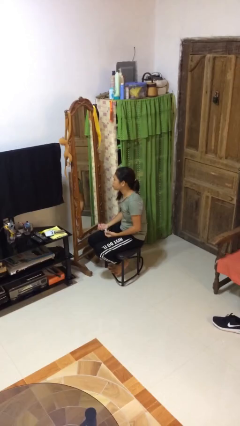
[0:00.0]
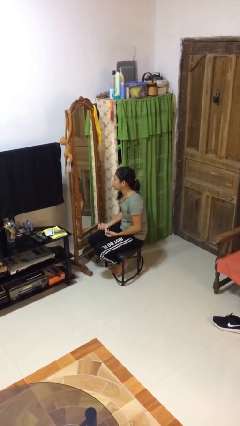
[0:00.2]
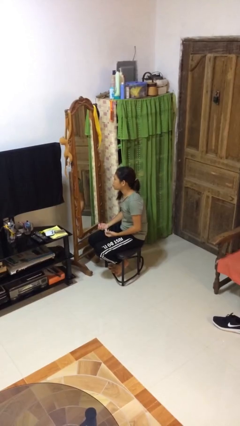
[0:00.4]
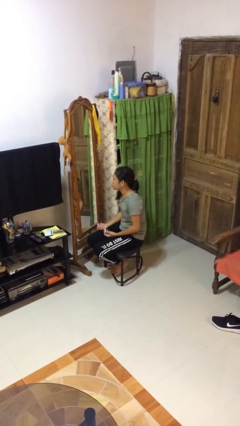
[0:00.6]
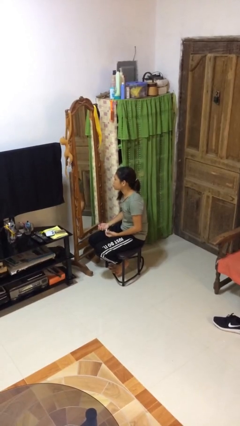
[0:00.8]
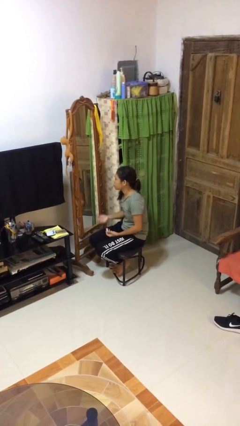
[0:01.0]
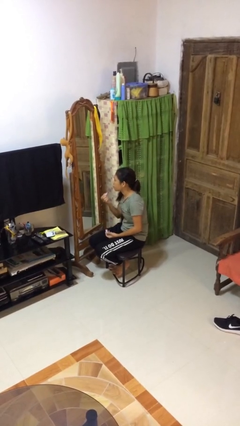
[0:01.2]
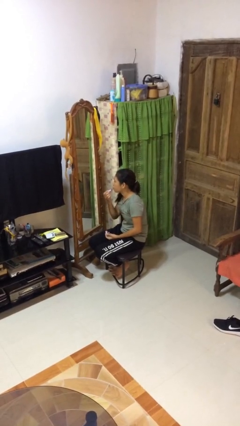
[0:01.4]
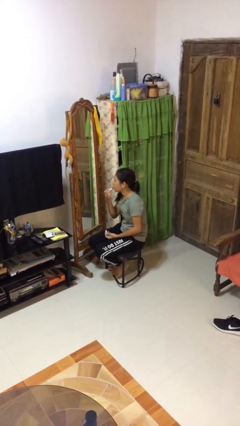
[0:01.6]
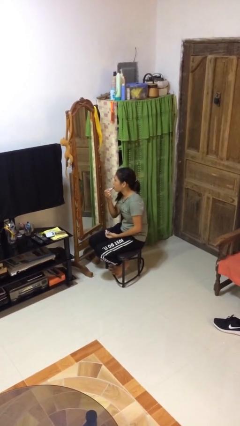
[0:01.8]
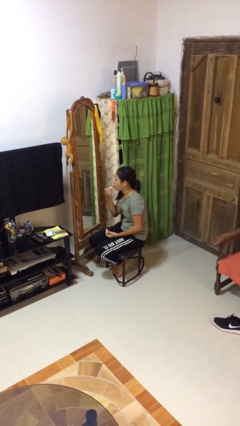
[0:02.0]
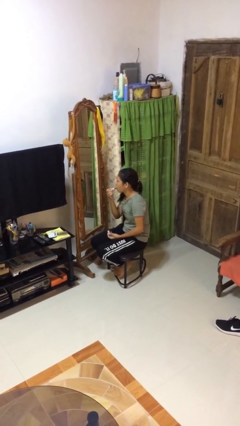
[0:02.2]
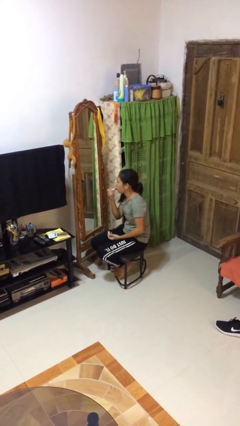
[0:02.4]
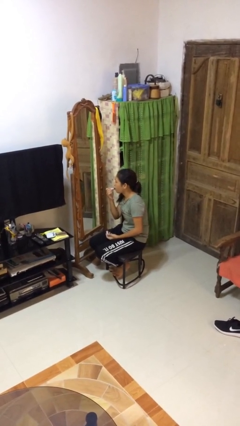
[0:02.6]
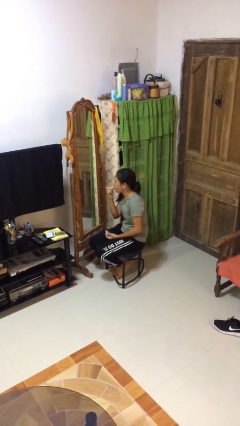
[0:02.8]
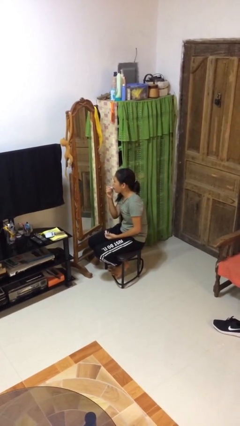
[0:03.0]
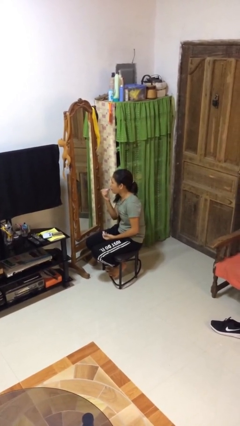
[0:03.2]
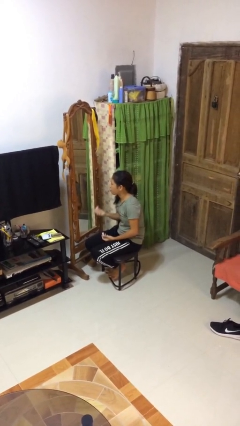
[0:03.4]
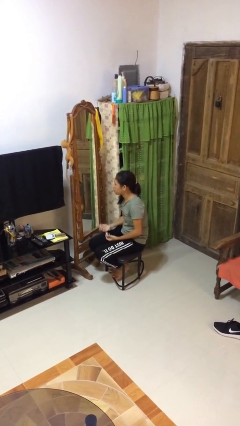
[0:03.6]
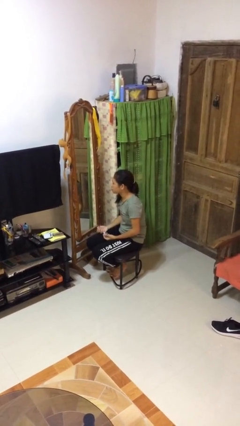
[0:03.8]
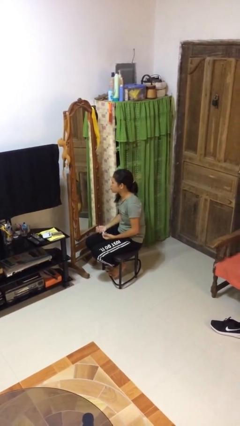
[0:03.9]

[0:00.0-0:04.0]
person applies lip makeup

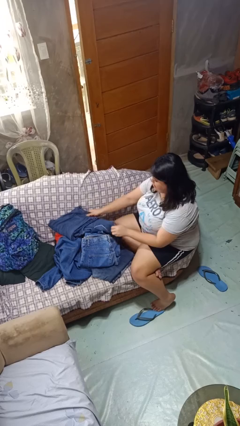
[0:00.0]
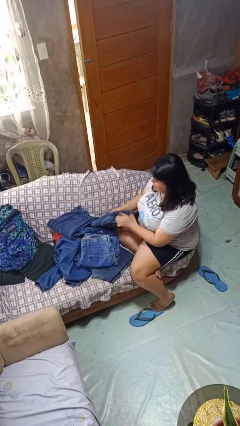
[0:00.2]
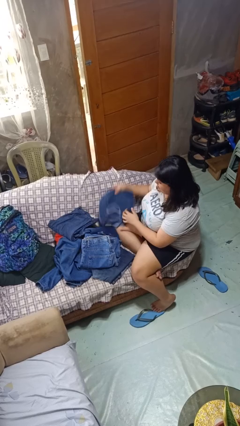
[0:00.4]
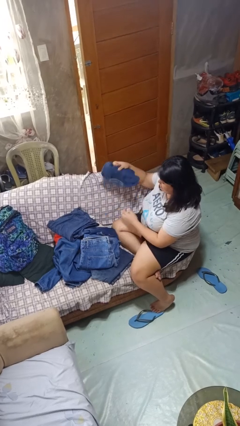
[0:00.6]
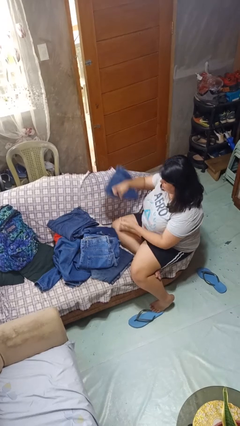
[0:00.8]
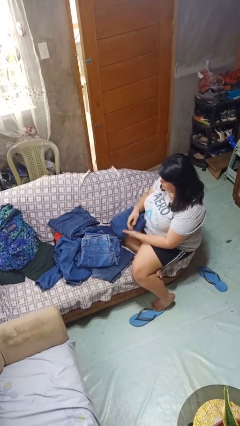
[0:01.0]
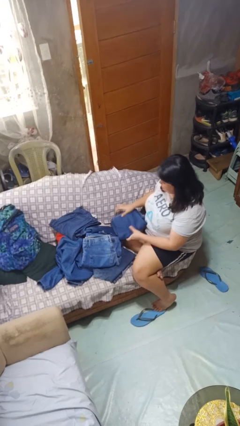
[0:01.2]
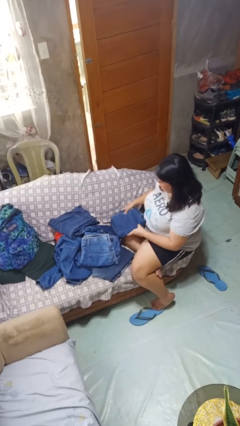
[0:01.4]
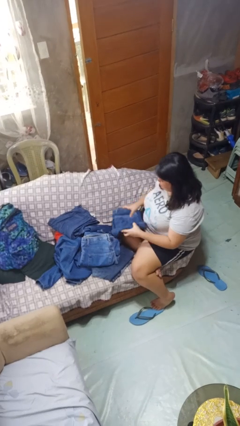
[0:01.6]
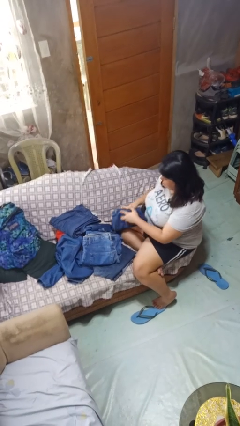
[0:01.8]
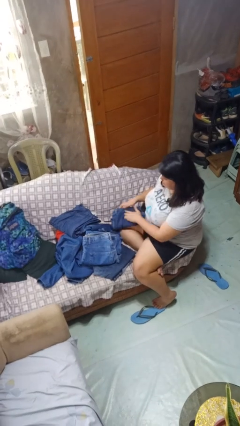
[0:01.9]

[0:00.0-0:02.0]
person folds pants

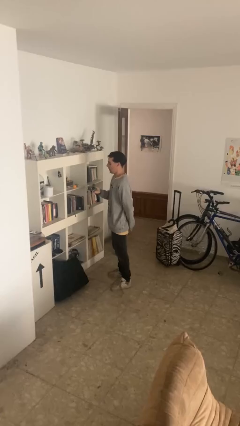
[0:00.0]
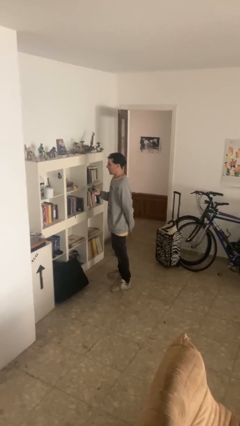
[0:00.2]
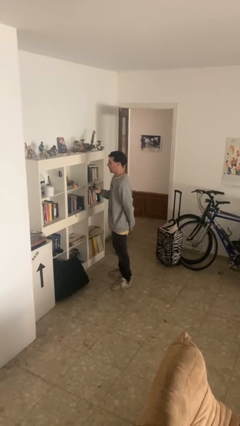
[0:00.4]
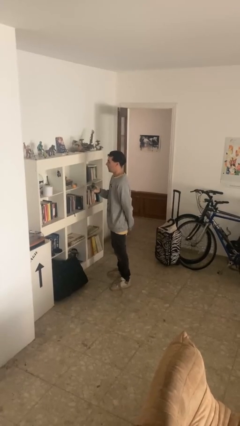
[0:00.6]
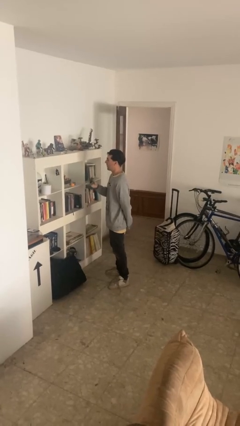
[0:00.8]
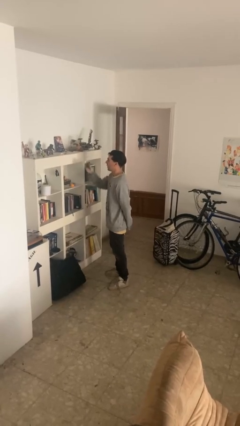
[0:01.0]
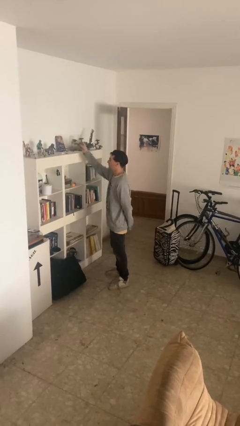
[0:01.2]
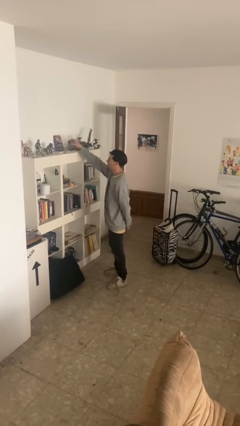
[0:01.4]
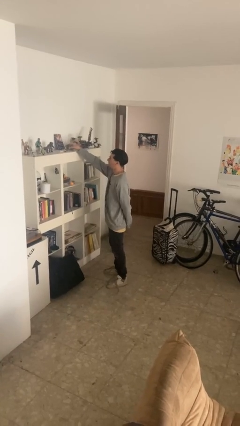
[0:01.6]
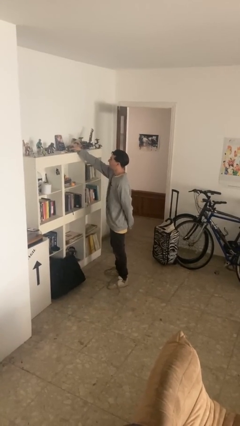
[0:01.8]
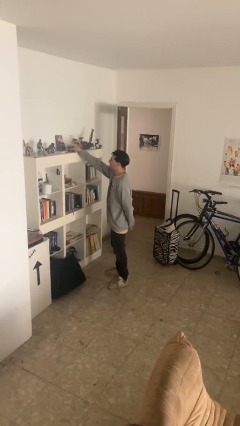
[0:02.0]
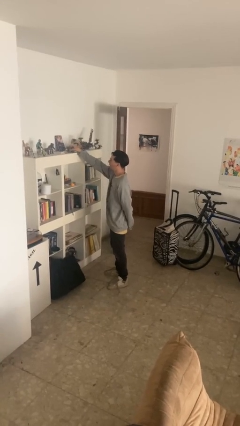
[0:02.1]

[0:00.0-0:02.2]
person puts down object on shelf

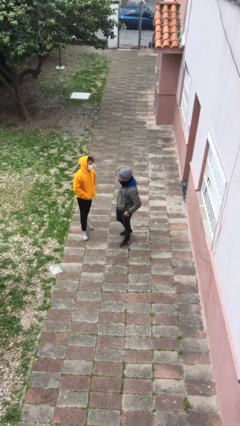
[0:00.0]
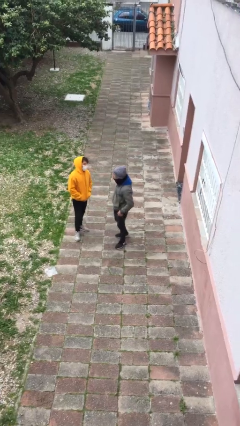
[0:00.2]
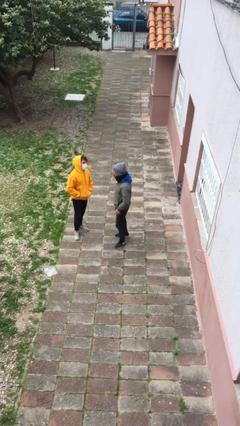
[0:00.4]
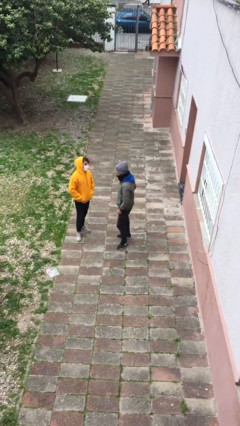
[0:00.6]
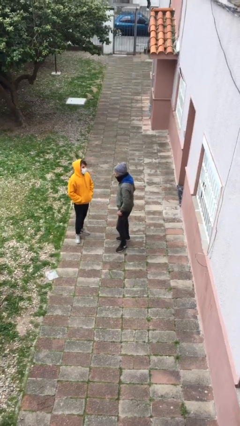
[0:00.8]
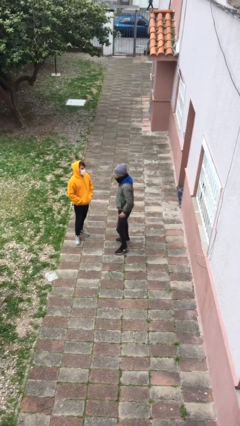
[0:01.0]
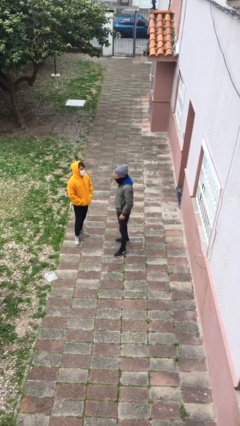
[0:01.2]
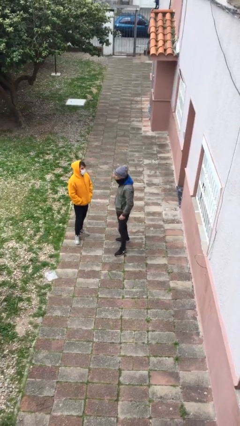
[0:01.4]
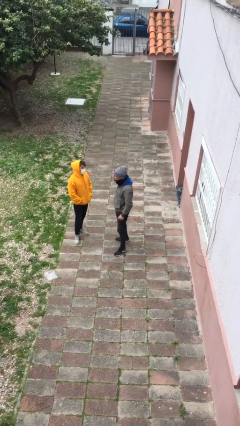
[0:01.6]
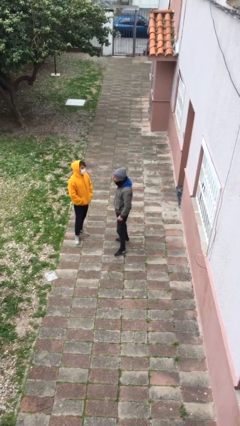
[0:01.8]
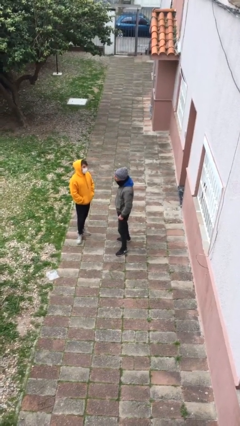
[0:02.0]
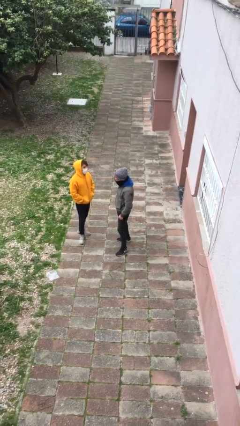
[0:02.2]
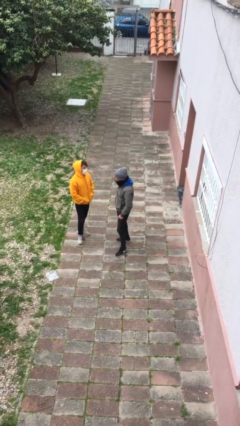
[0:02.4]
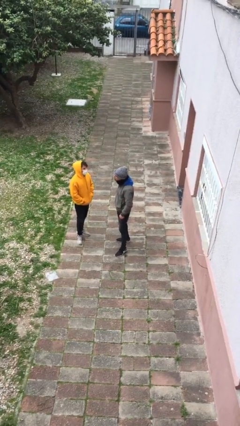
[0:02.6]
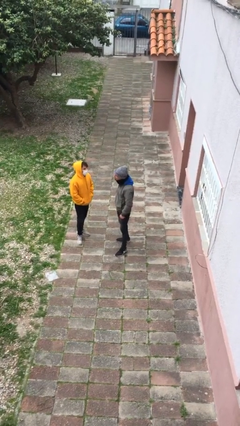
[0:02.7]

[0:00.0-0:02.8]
person talks to person

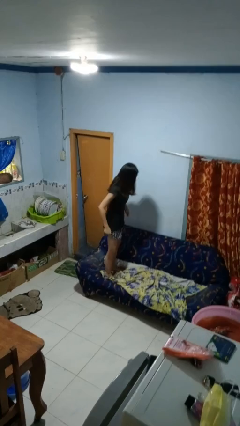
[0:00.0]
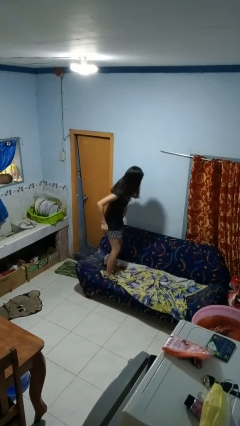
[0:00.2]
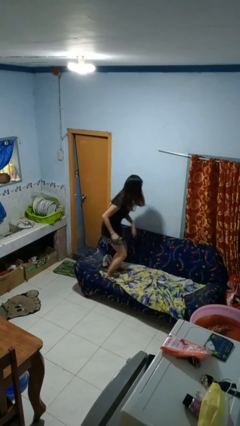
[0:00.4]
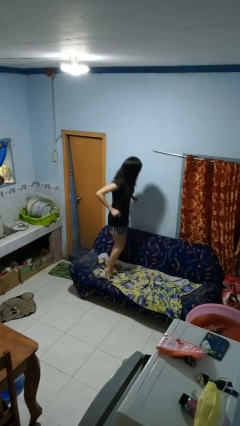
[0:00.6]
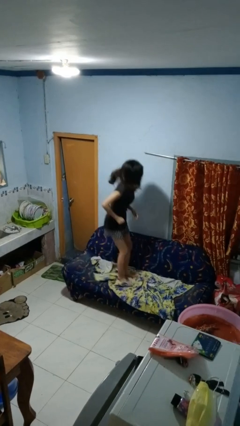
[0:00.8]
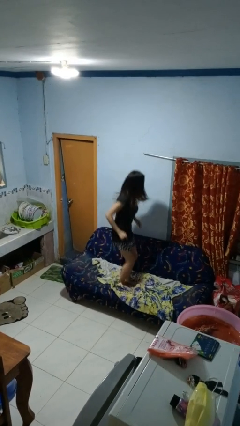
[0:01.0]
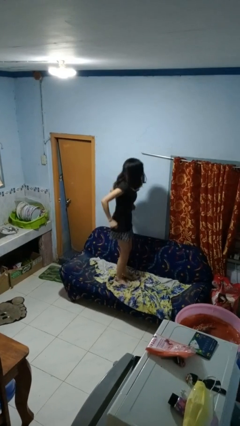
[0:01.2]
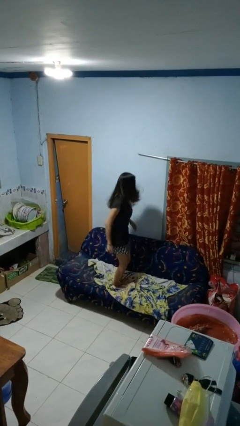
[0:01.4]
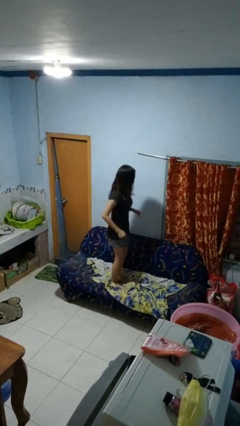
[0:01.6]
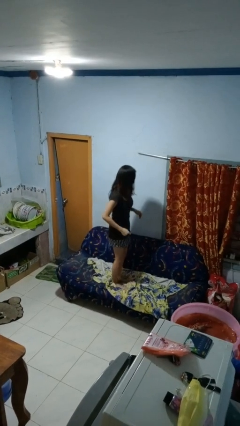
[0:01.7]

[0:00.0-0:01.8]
person jumps on couch

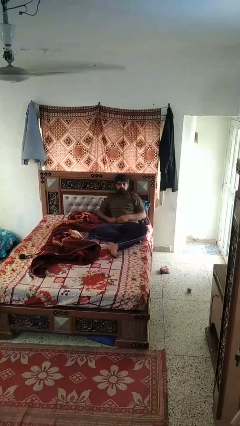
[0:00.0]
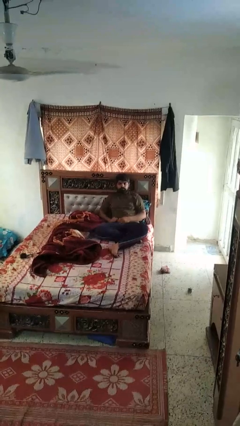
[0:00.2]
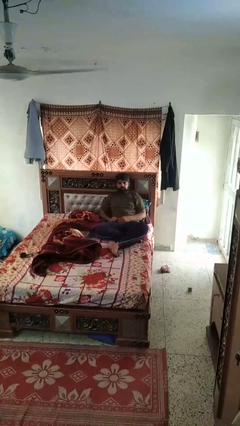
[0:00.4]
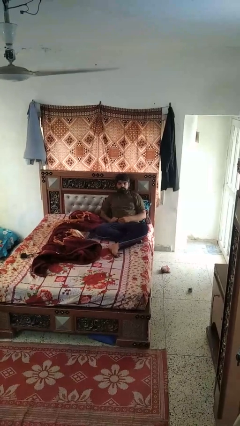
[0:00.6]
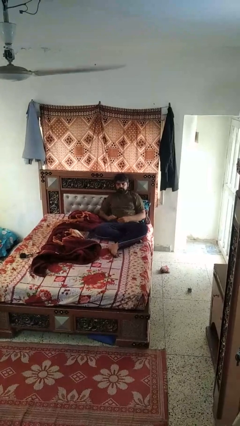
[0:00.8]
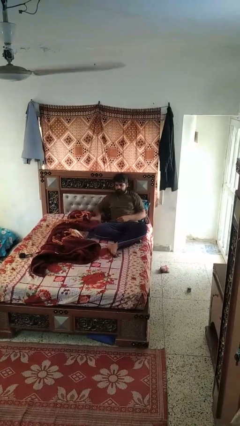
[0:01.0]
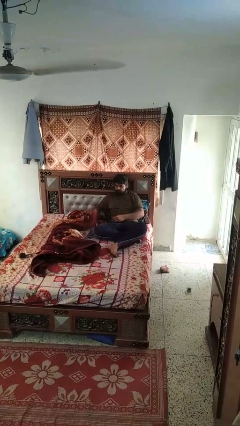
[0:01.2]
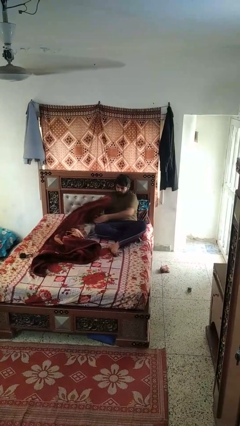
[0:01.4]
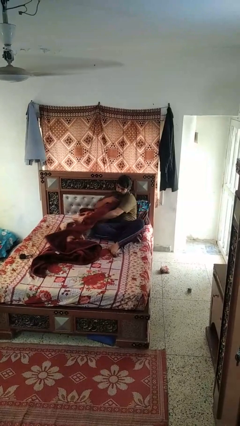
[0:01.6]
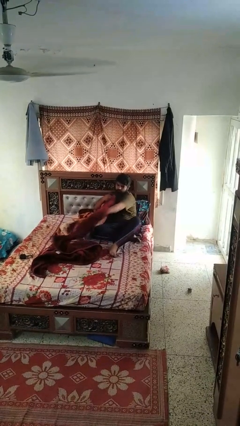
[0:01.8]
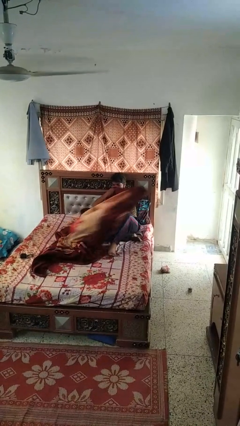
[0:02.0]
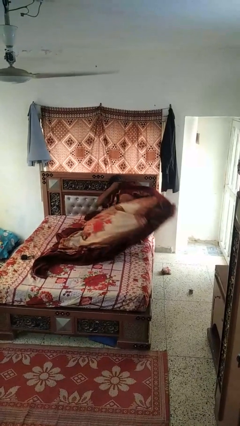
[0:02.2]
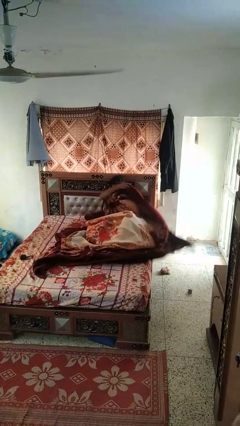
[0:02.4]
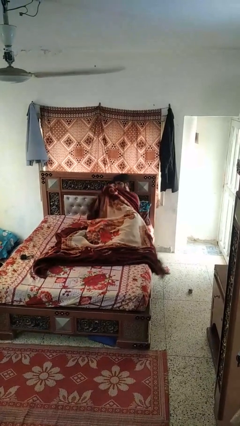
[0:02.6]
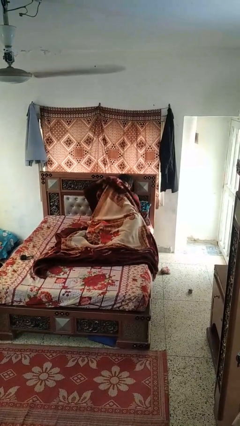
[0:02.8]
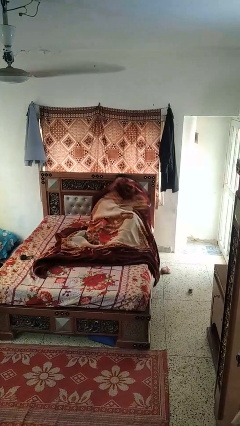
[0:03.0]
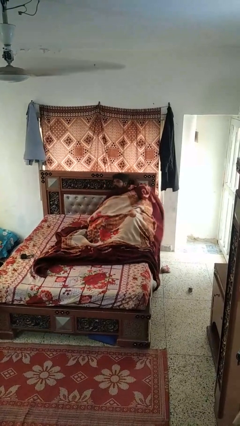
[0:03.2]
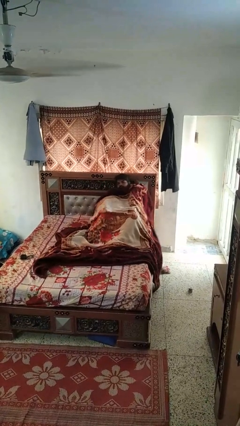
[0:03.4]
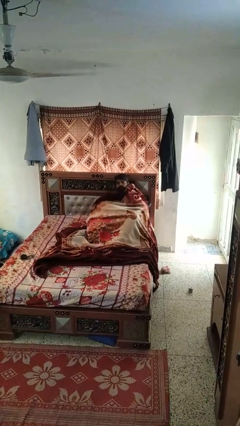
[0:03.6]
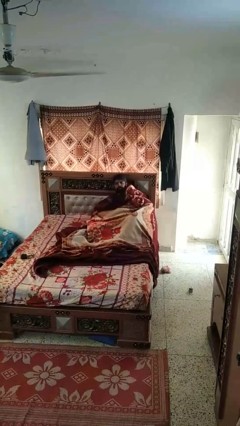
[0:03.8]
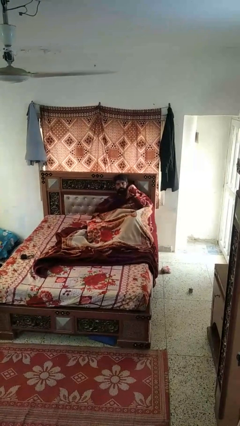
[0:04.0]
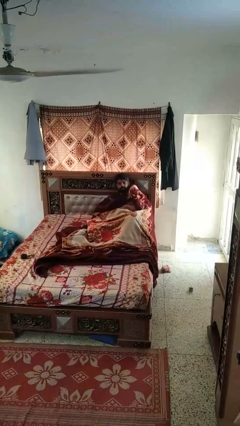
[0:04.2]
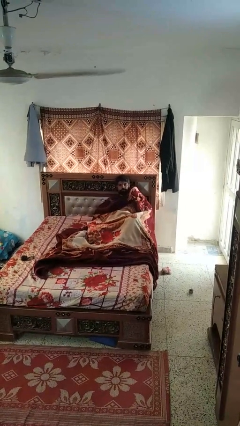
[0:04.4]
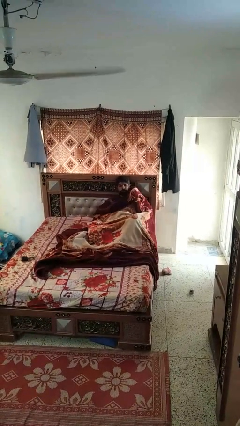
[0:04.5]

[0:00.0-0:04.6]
person covers with blanket

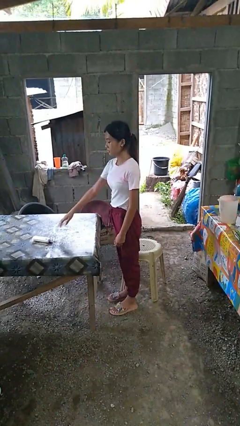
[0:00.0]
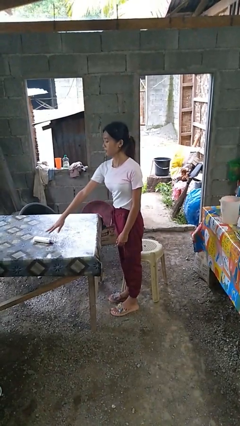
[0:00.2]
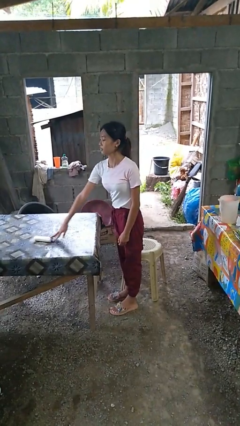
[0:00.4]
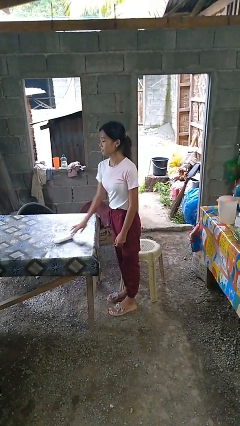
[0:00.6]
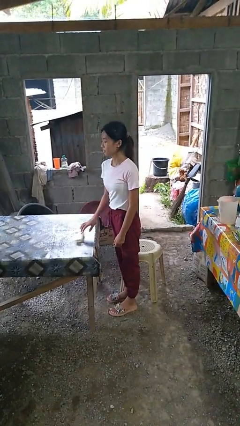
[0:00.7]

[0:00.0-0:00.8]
person picks up object from table
